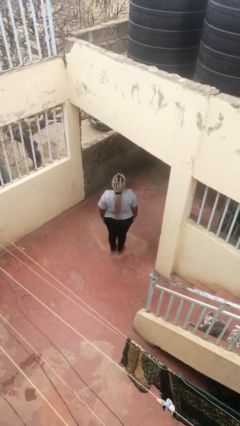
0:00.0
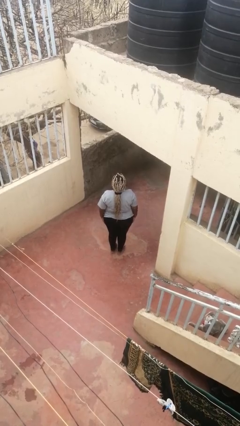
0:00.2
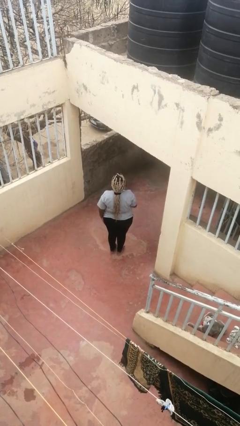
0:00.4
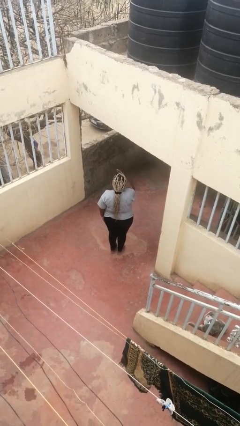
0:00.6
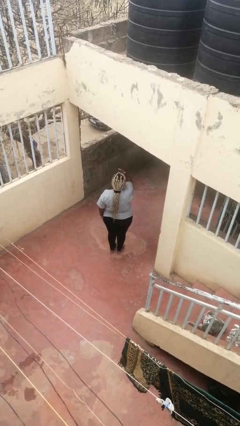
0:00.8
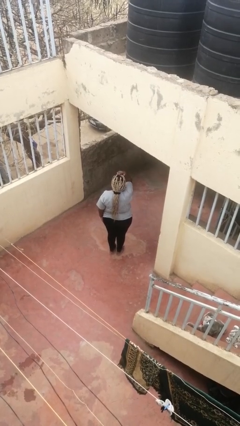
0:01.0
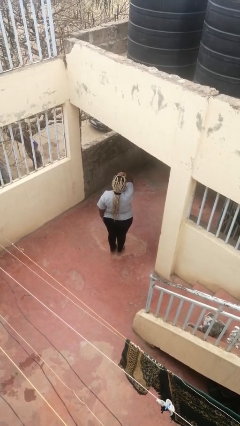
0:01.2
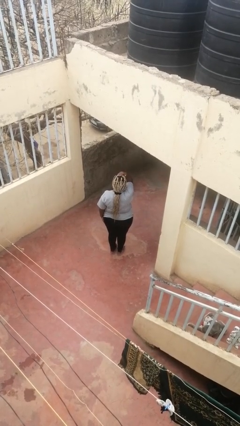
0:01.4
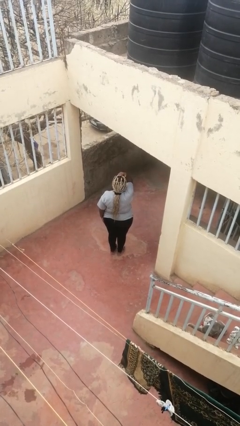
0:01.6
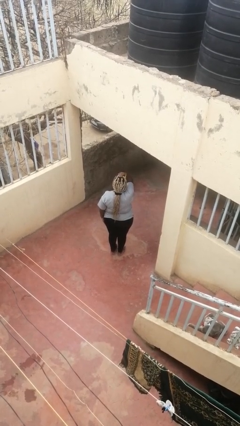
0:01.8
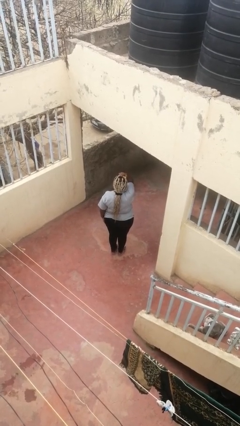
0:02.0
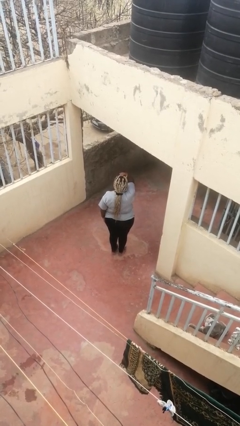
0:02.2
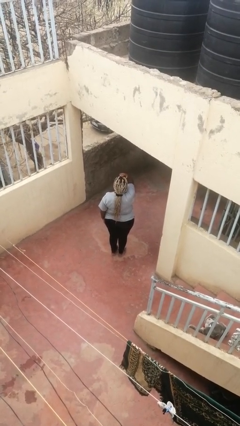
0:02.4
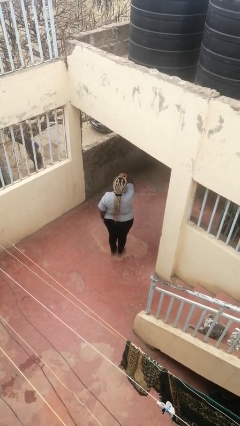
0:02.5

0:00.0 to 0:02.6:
person pats head

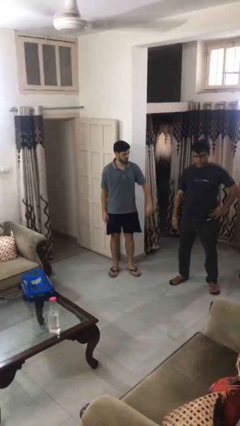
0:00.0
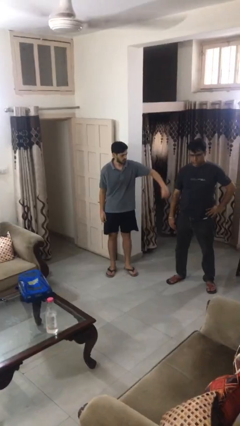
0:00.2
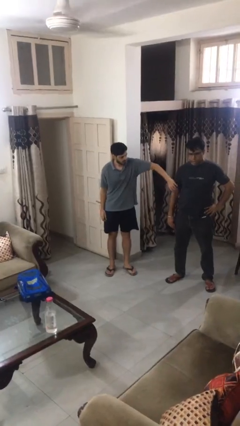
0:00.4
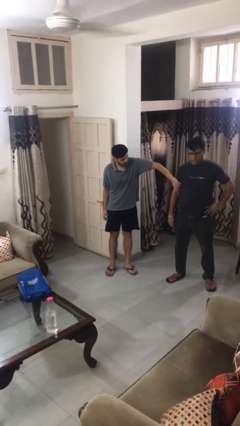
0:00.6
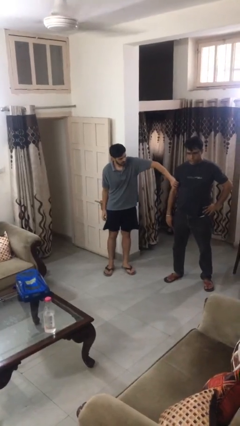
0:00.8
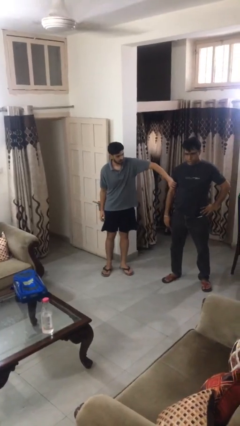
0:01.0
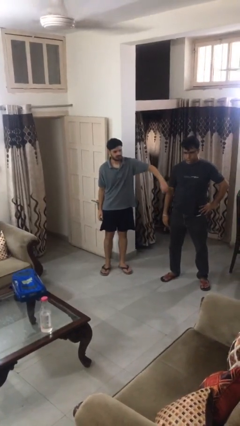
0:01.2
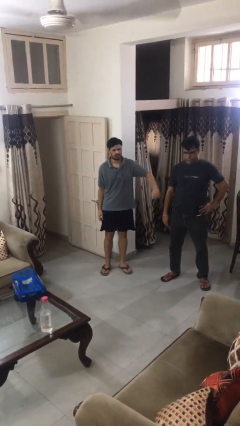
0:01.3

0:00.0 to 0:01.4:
person grabs person by bicep

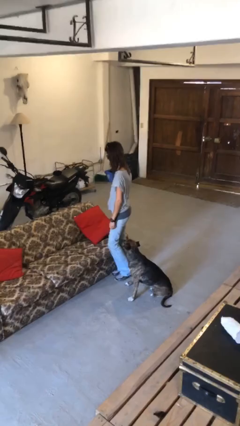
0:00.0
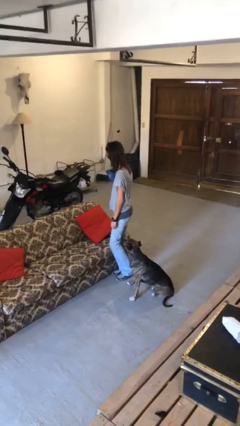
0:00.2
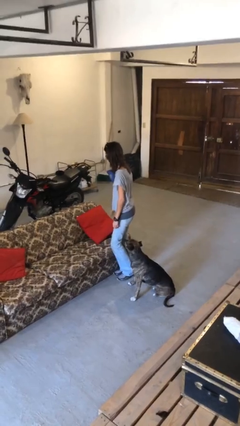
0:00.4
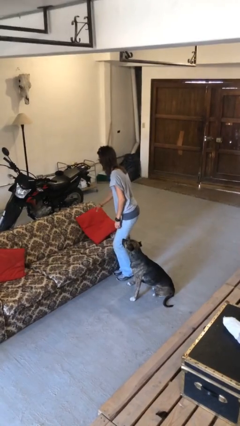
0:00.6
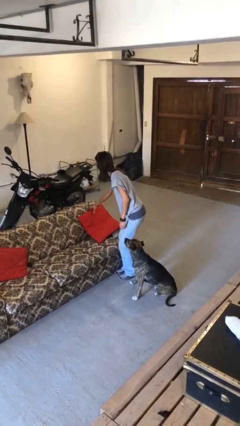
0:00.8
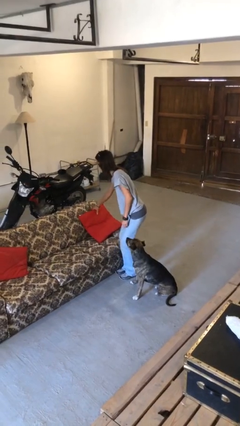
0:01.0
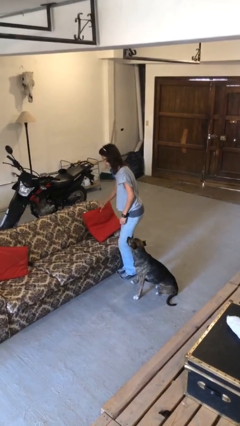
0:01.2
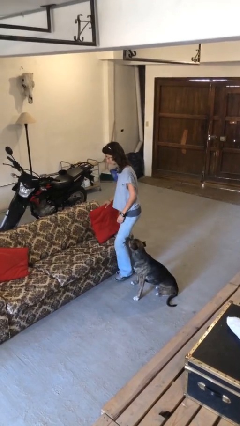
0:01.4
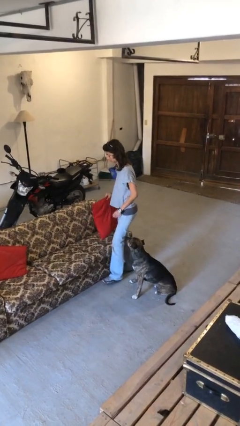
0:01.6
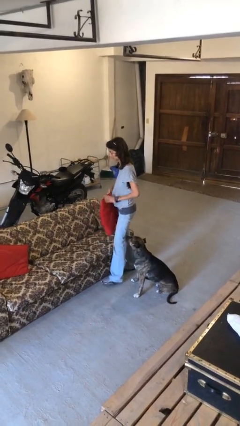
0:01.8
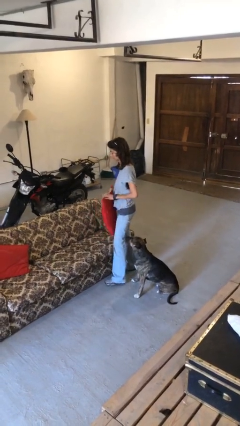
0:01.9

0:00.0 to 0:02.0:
person picks up object from couch

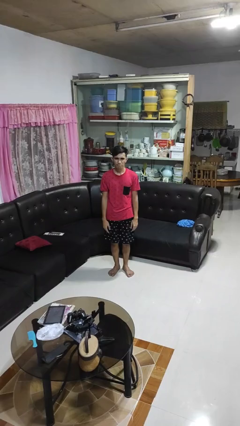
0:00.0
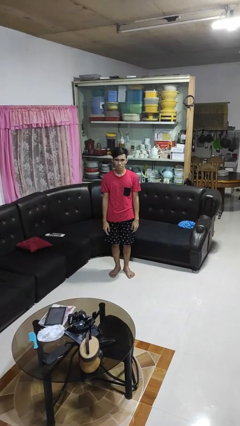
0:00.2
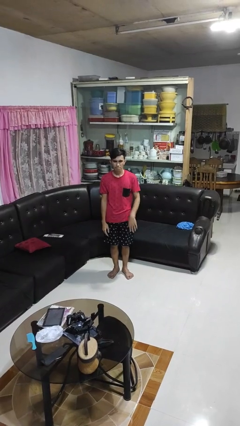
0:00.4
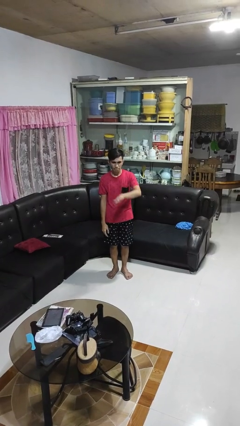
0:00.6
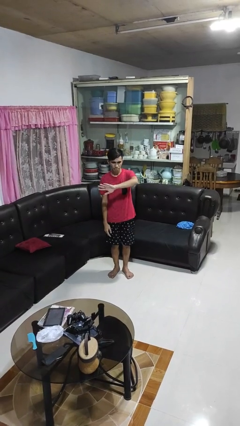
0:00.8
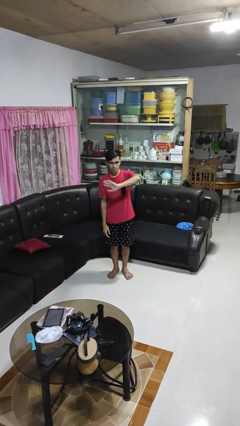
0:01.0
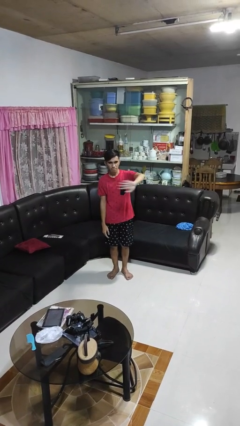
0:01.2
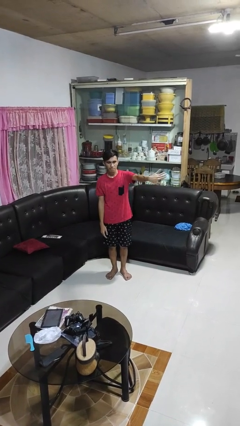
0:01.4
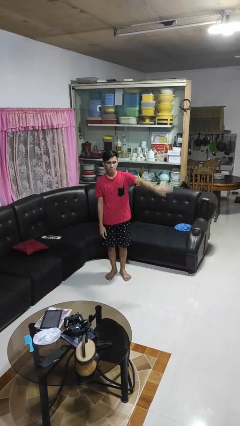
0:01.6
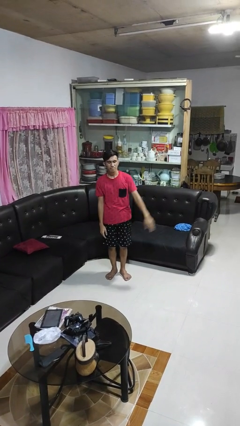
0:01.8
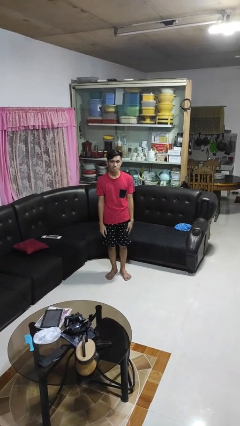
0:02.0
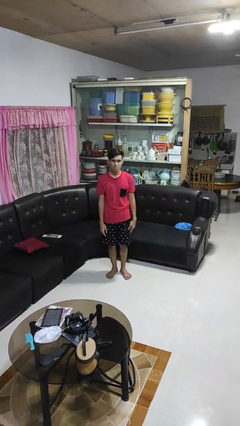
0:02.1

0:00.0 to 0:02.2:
person gestures swipe left

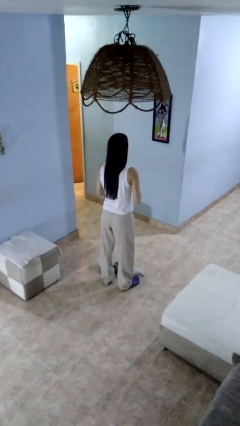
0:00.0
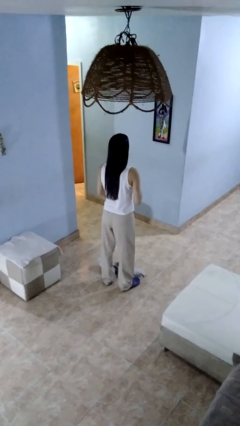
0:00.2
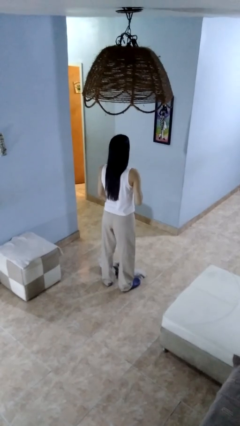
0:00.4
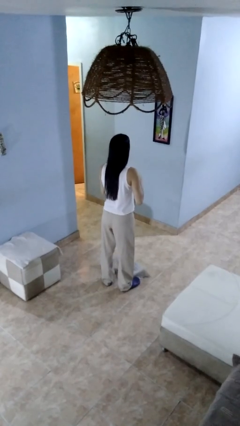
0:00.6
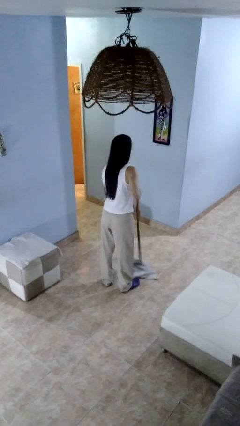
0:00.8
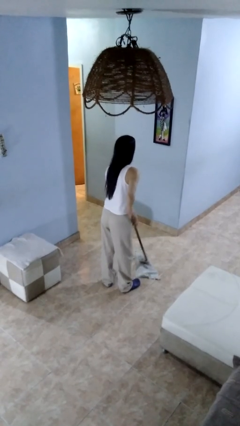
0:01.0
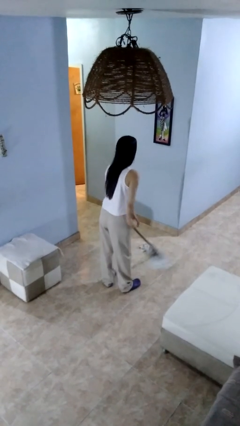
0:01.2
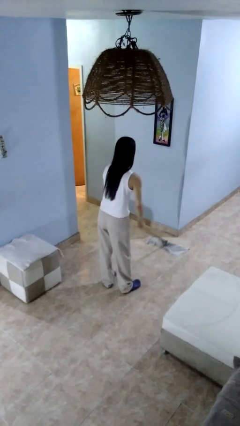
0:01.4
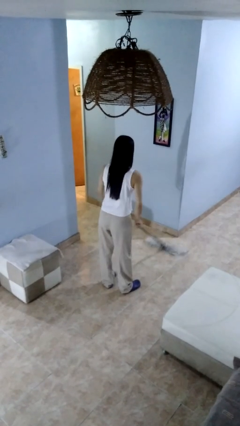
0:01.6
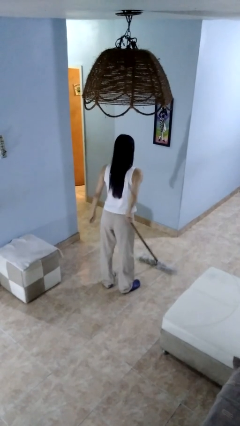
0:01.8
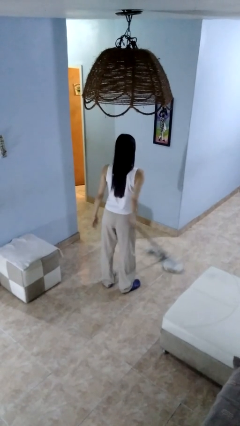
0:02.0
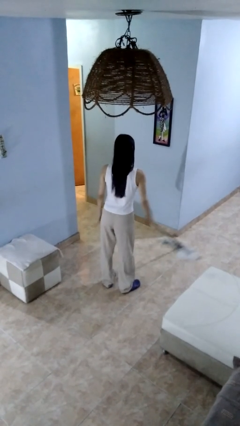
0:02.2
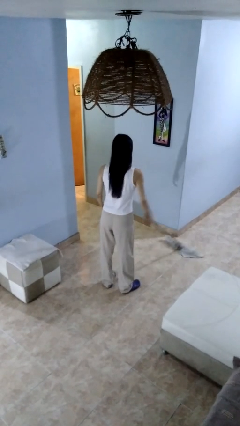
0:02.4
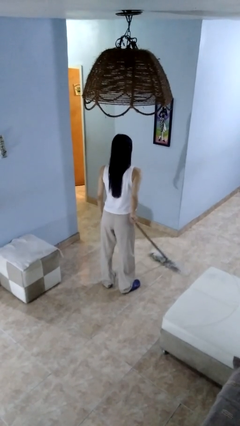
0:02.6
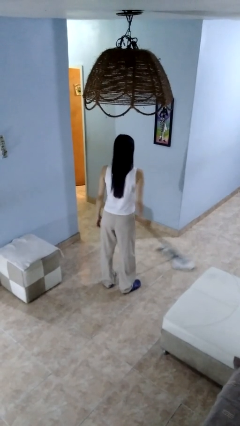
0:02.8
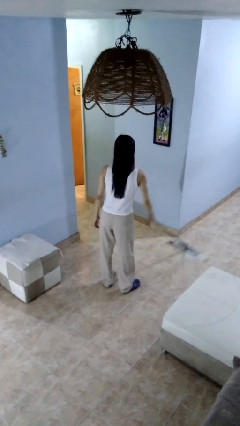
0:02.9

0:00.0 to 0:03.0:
person mops

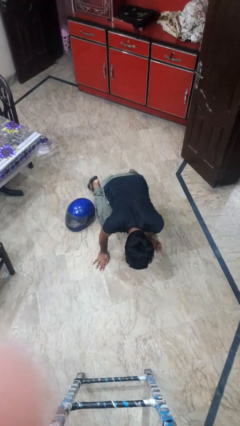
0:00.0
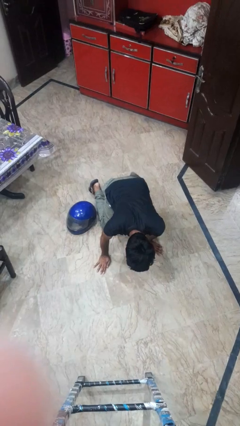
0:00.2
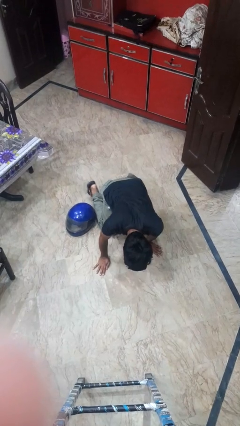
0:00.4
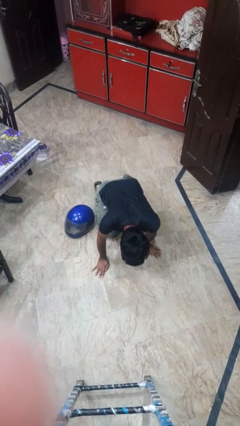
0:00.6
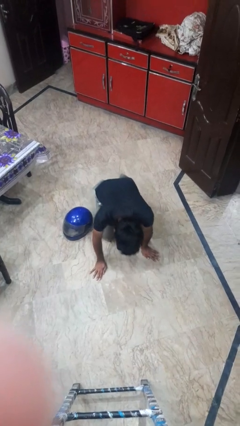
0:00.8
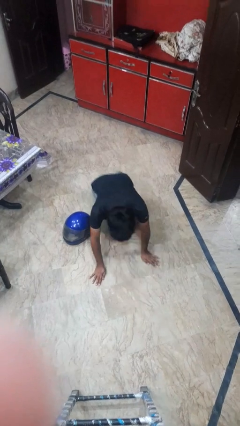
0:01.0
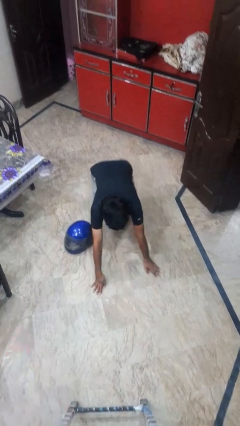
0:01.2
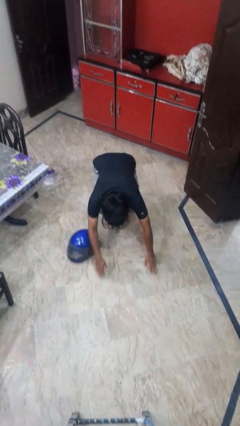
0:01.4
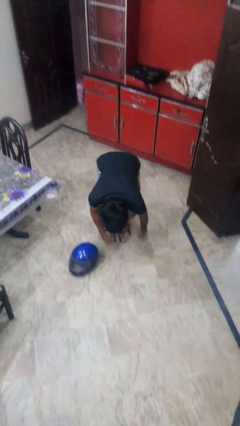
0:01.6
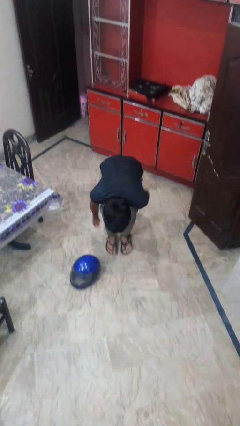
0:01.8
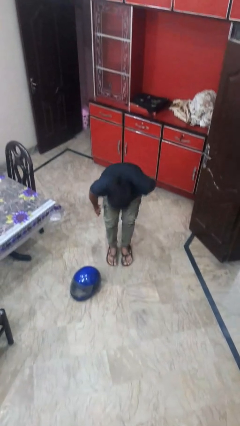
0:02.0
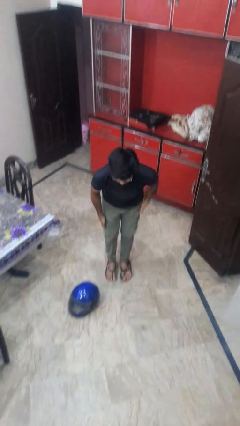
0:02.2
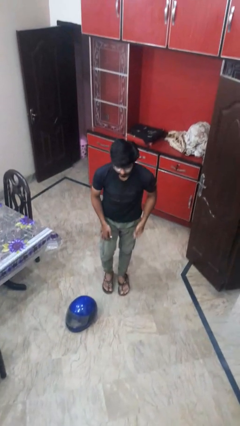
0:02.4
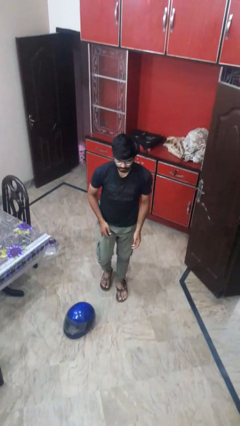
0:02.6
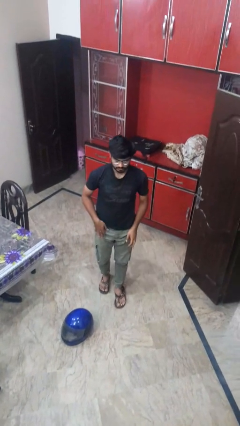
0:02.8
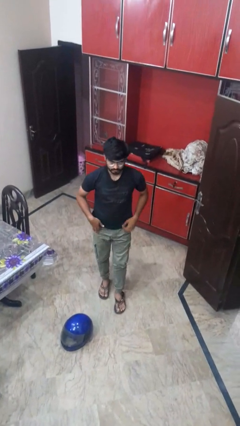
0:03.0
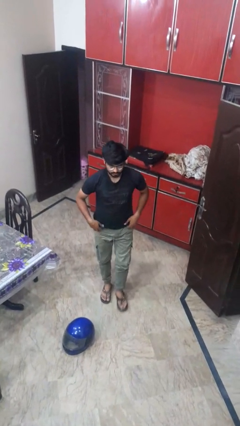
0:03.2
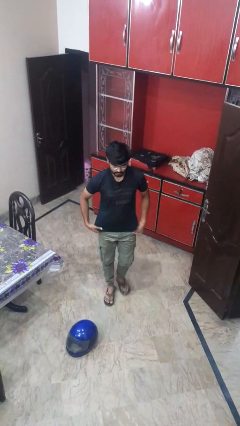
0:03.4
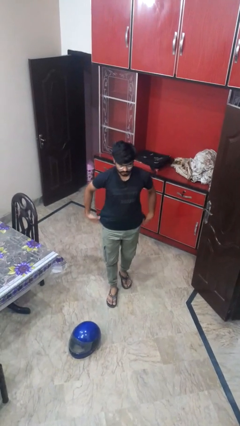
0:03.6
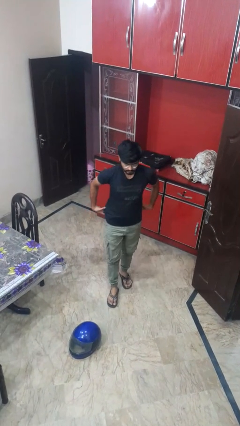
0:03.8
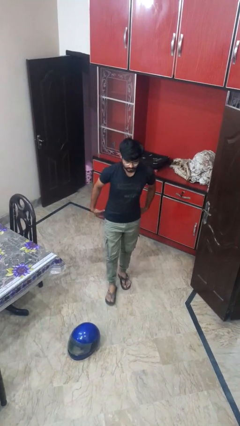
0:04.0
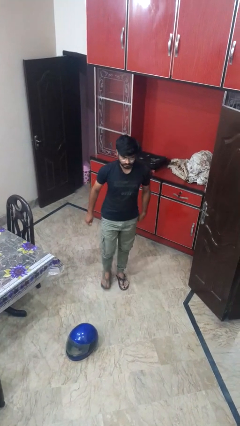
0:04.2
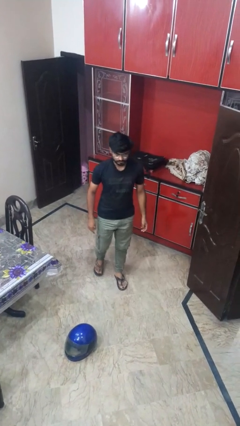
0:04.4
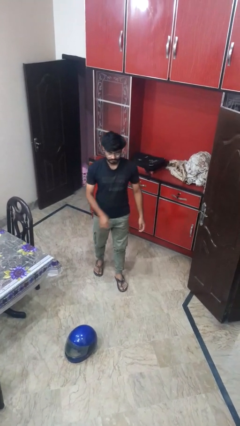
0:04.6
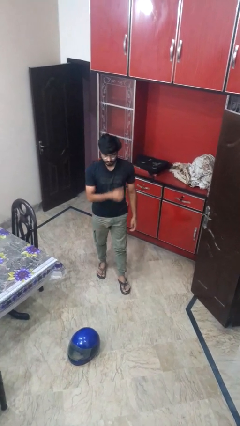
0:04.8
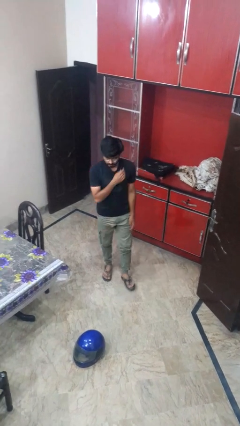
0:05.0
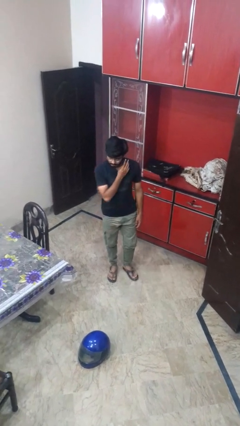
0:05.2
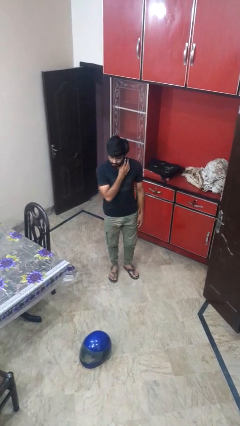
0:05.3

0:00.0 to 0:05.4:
person stands up from floor

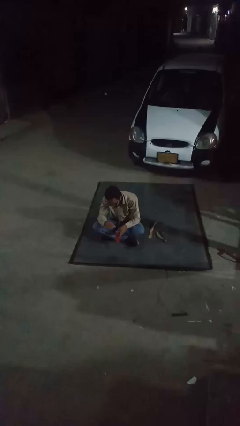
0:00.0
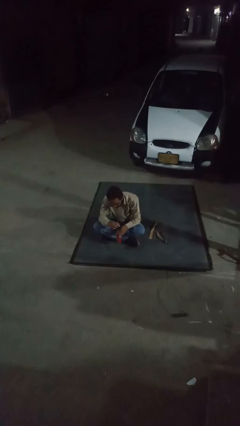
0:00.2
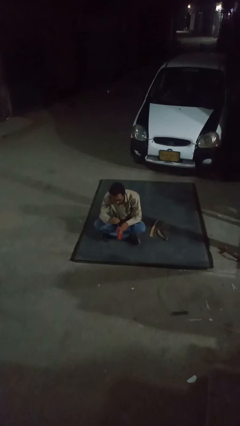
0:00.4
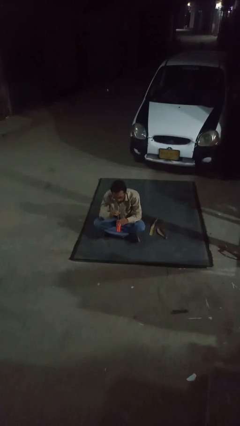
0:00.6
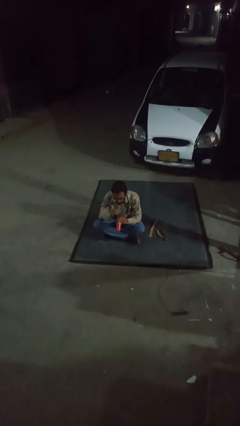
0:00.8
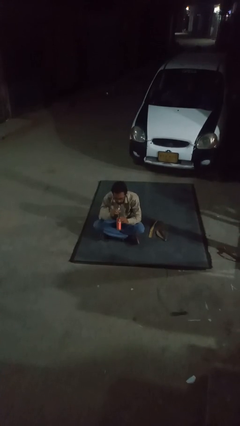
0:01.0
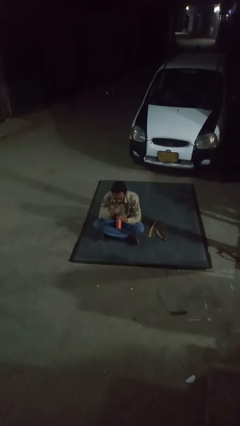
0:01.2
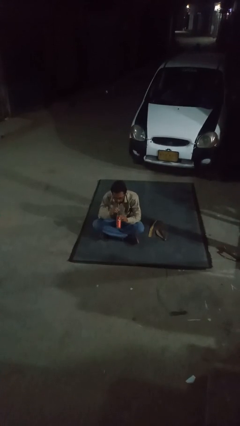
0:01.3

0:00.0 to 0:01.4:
person drinks from straw
